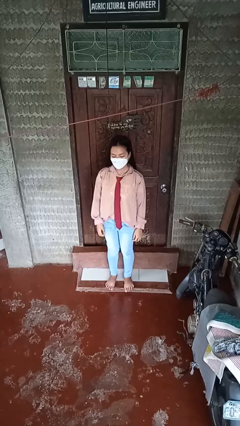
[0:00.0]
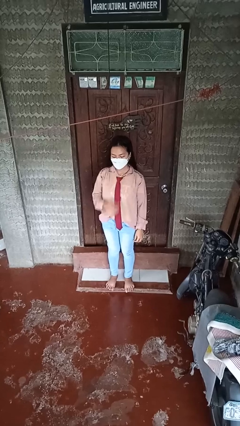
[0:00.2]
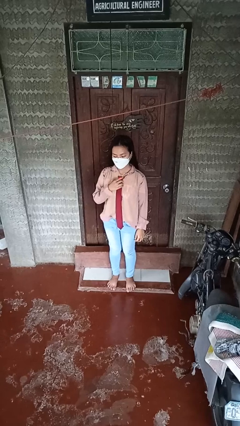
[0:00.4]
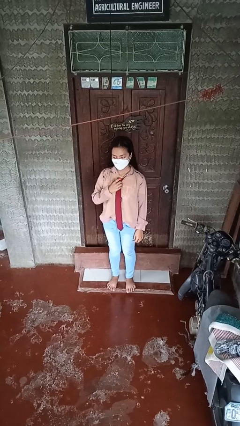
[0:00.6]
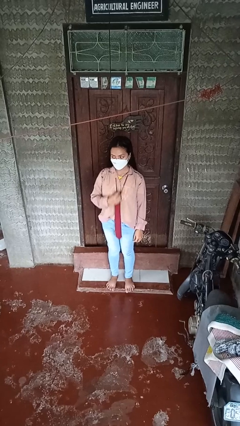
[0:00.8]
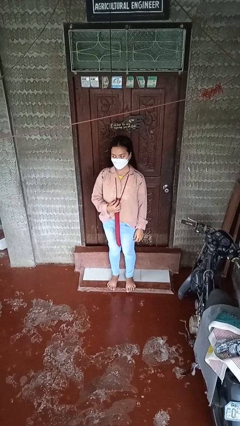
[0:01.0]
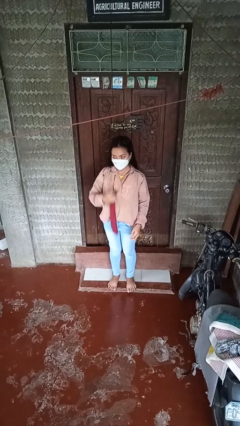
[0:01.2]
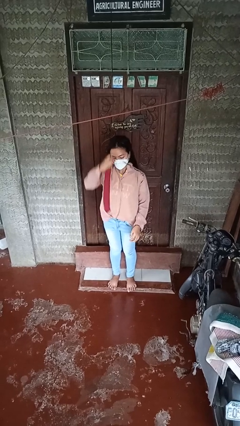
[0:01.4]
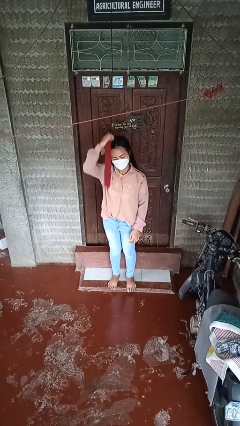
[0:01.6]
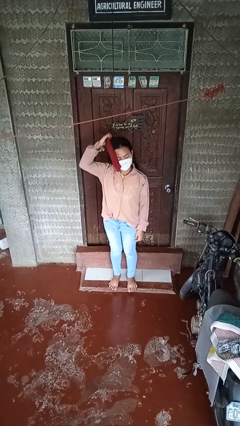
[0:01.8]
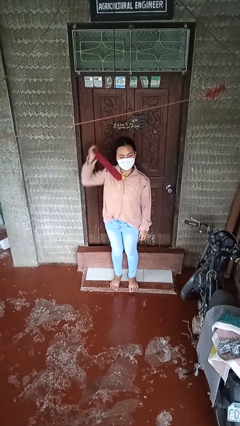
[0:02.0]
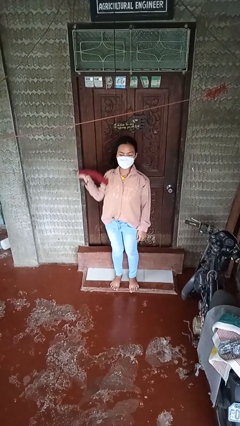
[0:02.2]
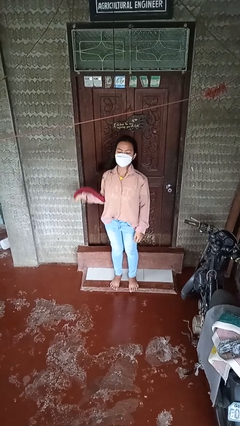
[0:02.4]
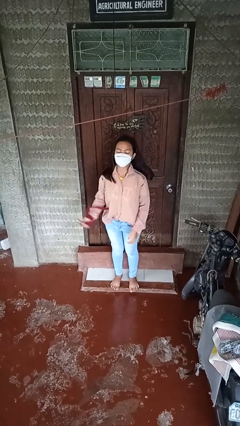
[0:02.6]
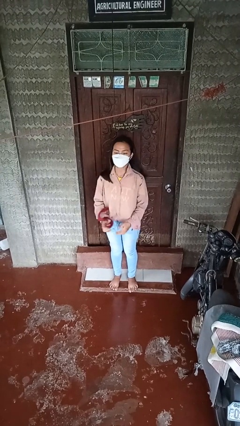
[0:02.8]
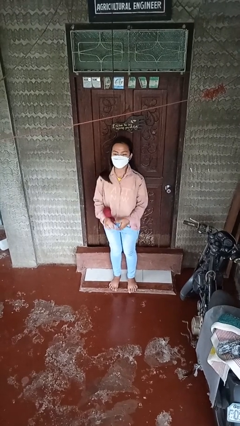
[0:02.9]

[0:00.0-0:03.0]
person takes off necktie

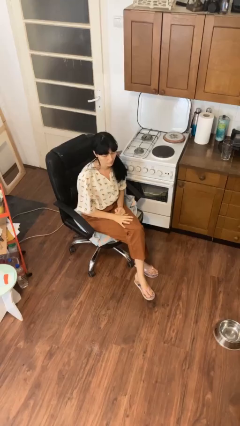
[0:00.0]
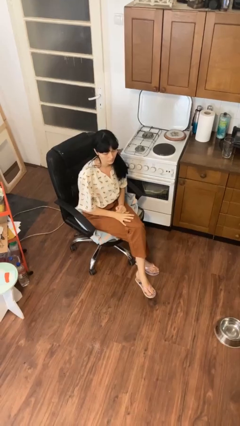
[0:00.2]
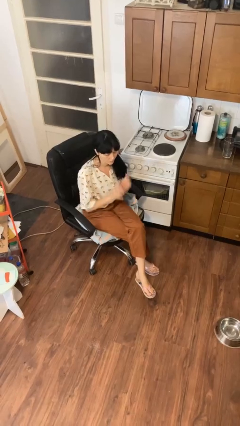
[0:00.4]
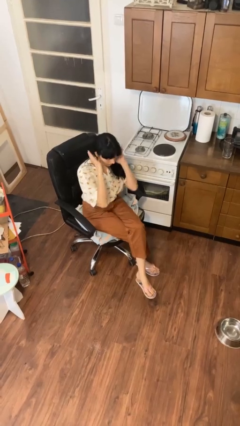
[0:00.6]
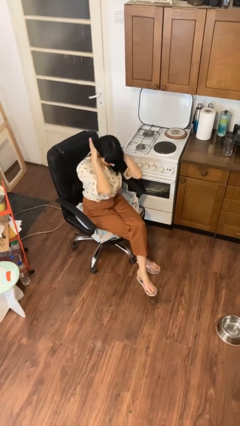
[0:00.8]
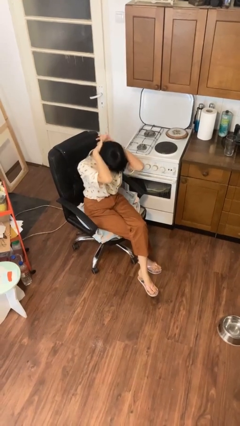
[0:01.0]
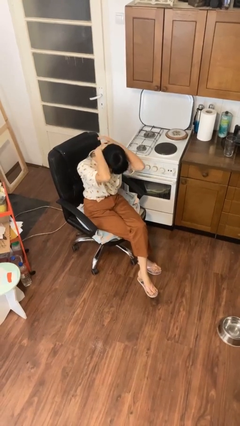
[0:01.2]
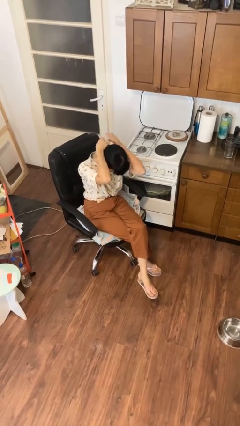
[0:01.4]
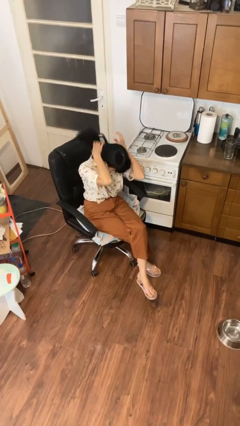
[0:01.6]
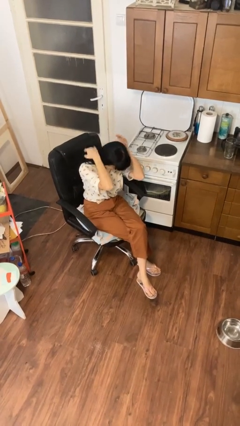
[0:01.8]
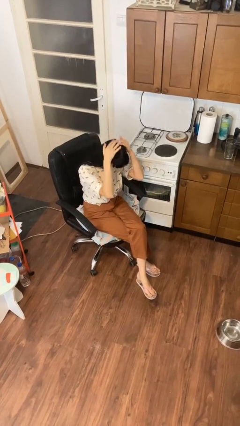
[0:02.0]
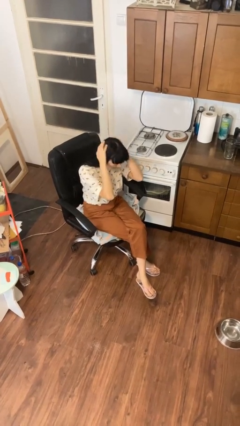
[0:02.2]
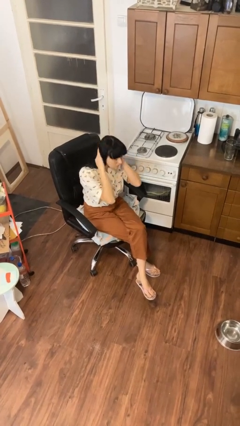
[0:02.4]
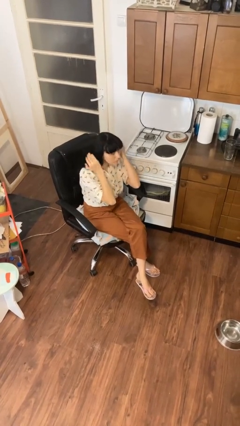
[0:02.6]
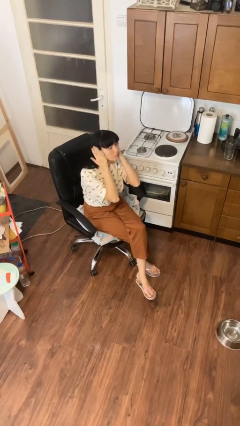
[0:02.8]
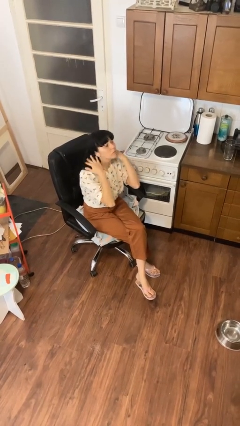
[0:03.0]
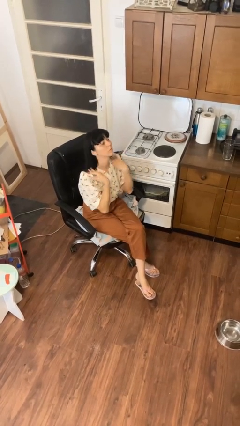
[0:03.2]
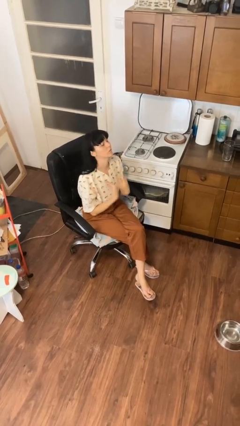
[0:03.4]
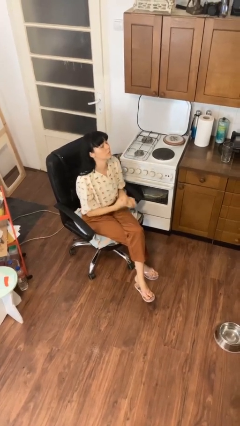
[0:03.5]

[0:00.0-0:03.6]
person strokes hair

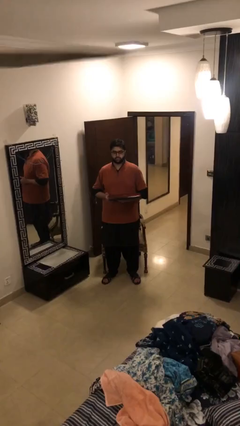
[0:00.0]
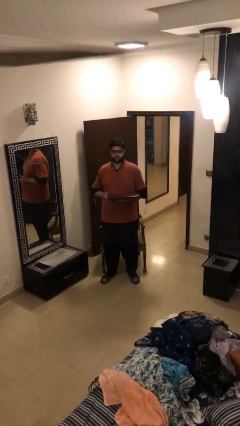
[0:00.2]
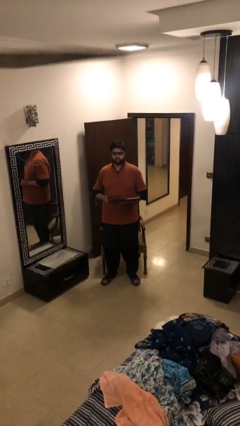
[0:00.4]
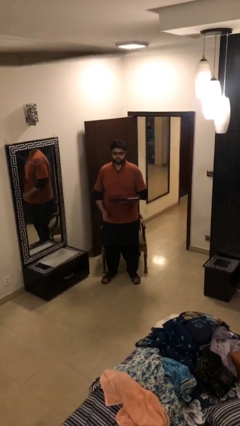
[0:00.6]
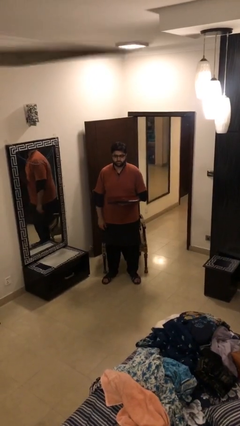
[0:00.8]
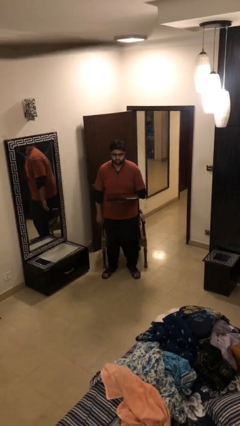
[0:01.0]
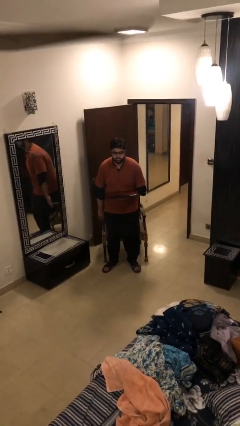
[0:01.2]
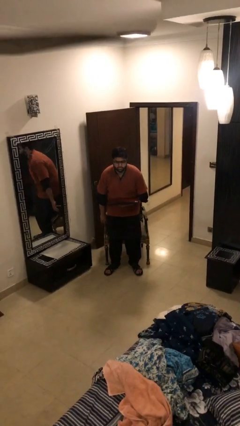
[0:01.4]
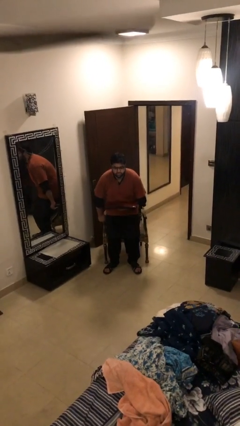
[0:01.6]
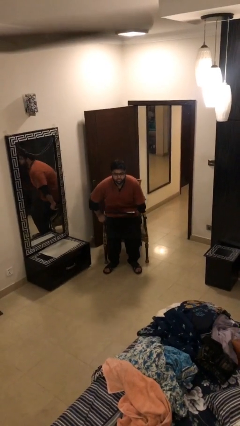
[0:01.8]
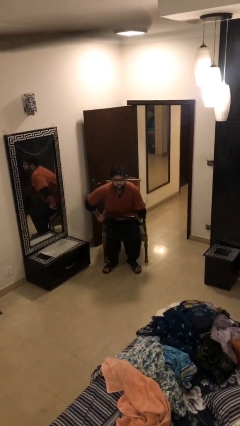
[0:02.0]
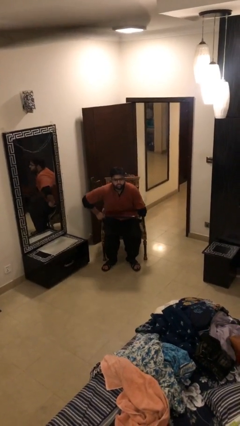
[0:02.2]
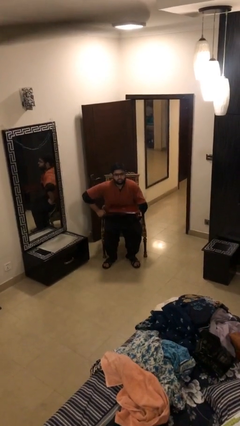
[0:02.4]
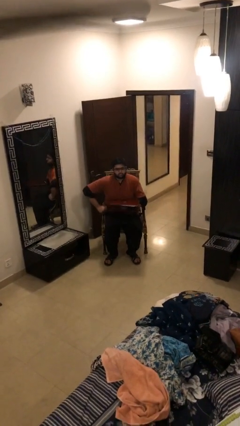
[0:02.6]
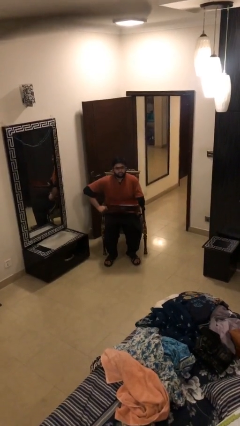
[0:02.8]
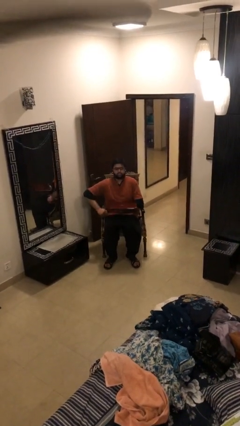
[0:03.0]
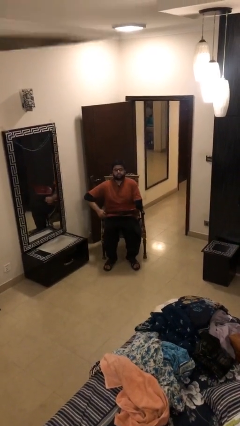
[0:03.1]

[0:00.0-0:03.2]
person sits down

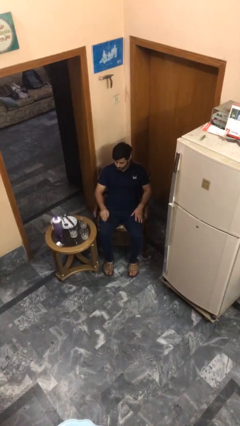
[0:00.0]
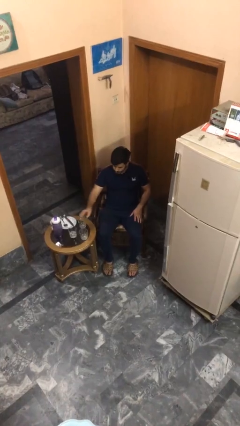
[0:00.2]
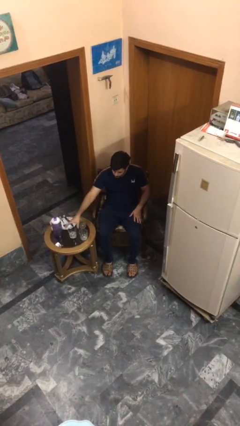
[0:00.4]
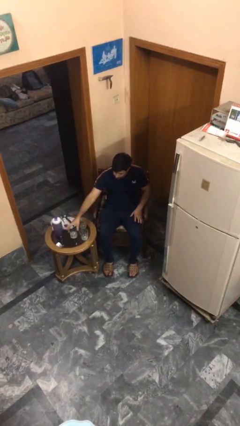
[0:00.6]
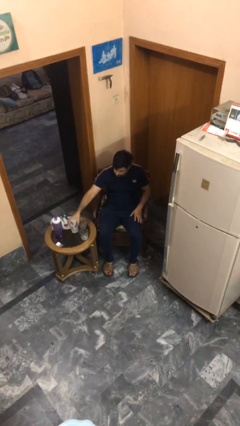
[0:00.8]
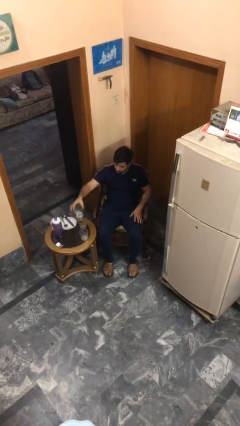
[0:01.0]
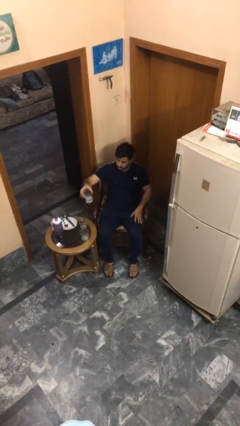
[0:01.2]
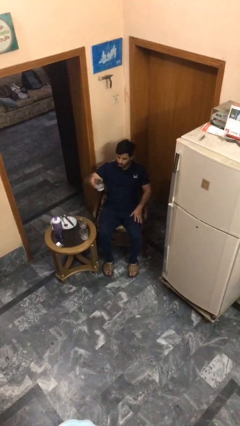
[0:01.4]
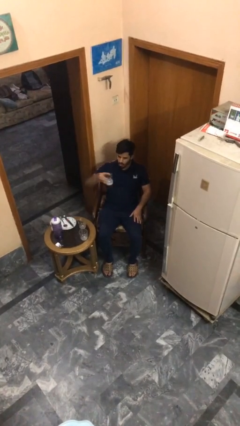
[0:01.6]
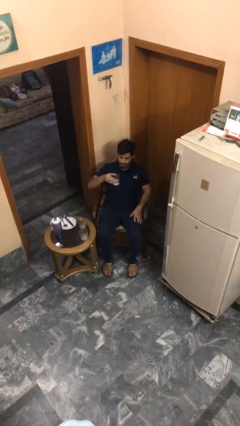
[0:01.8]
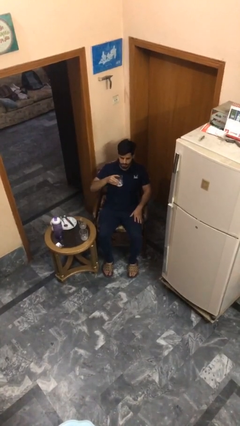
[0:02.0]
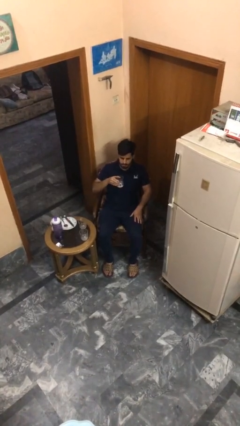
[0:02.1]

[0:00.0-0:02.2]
person picks up object from table

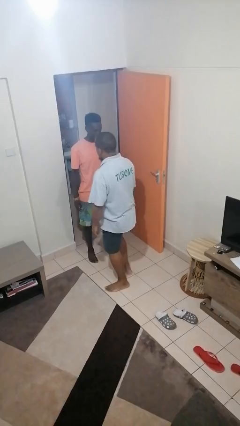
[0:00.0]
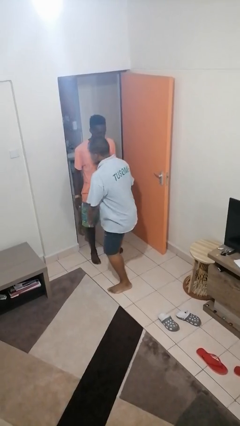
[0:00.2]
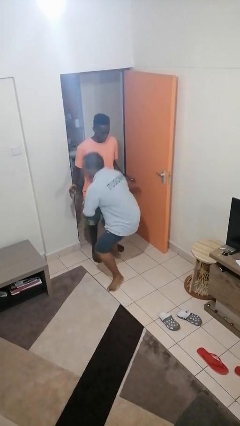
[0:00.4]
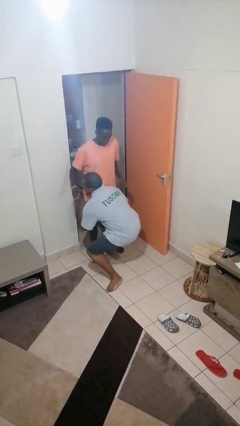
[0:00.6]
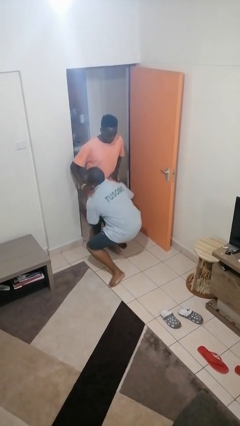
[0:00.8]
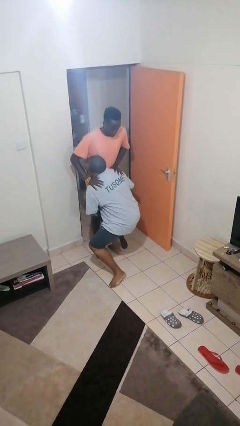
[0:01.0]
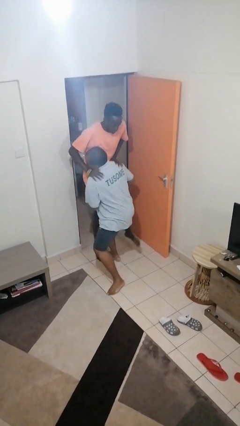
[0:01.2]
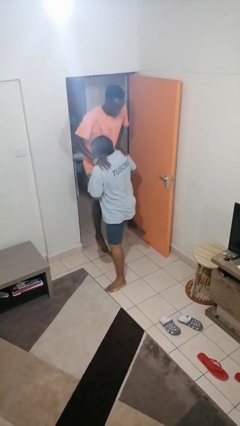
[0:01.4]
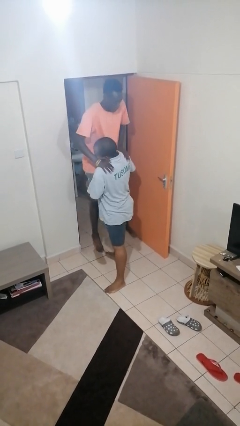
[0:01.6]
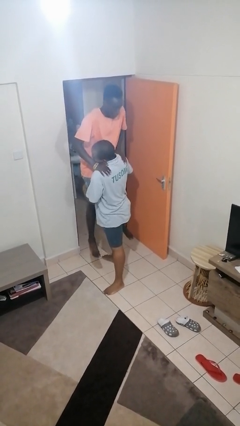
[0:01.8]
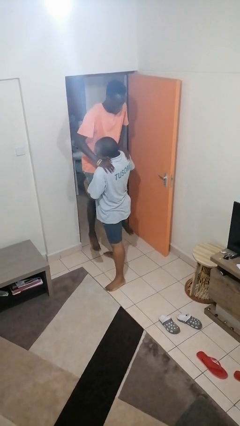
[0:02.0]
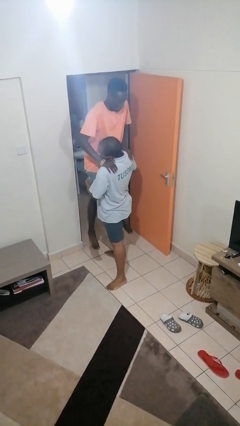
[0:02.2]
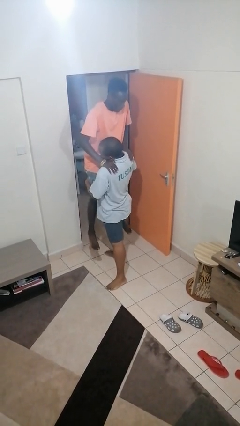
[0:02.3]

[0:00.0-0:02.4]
person picks up person

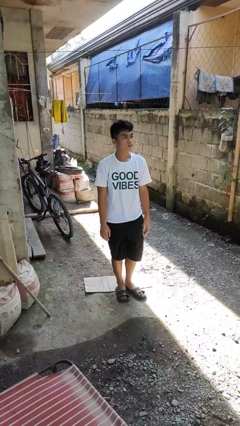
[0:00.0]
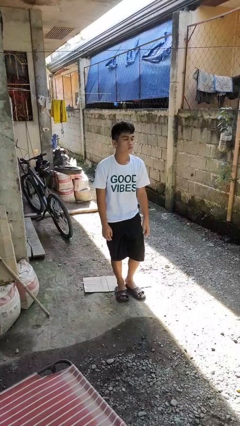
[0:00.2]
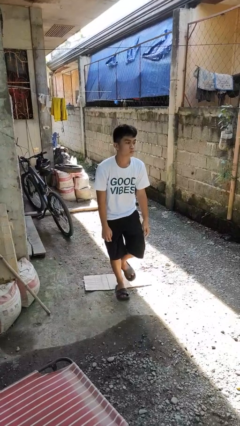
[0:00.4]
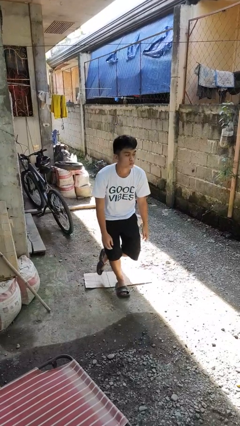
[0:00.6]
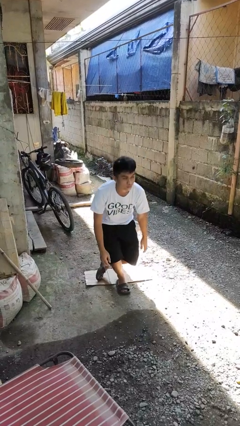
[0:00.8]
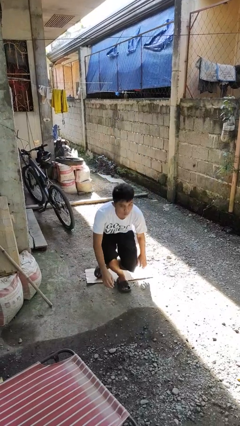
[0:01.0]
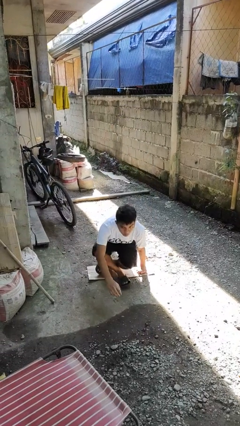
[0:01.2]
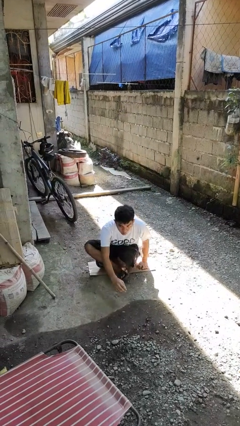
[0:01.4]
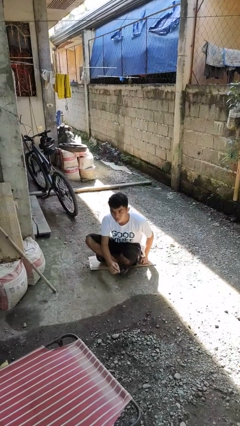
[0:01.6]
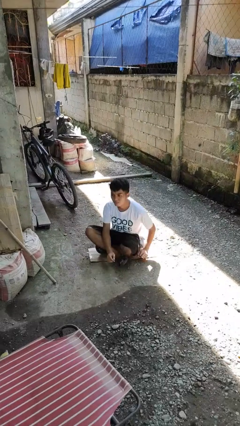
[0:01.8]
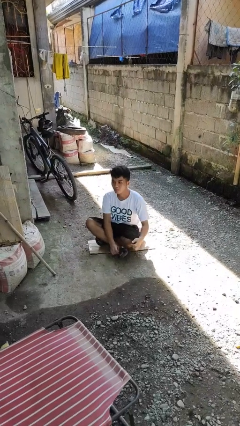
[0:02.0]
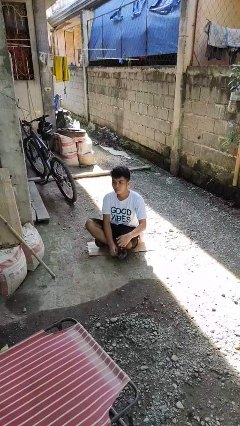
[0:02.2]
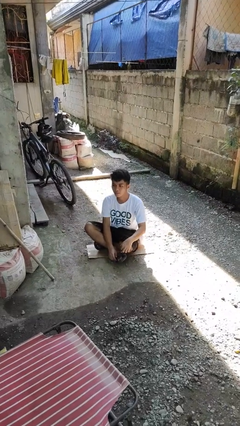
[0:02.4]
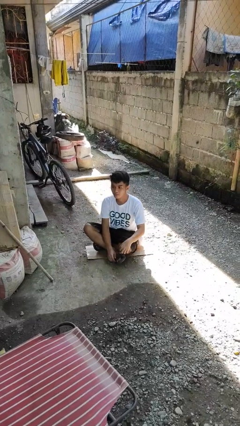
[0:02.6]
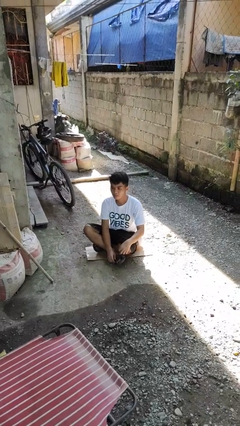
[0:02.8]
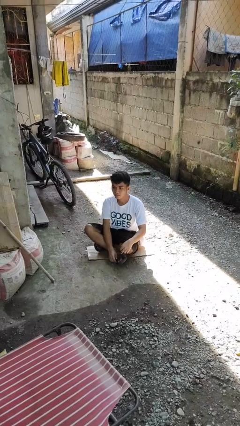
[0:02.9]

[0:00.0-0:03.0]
person sits crisscross

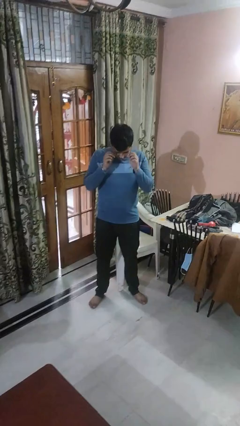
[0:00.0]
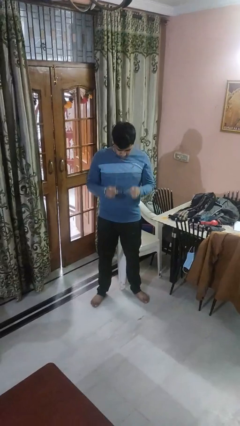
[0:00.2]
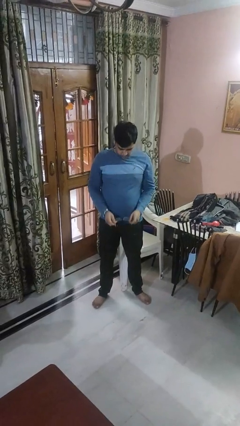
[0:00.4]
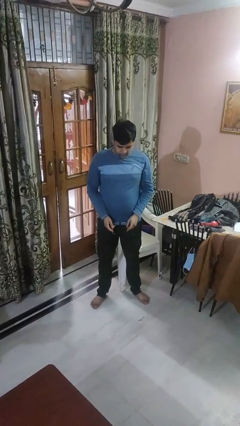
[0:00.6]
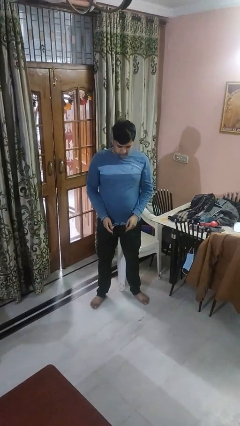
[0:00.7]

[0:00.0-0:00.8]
person takes off glasses
